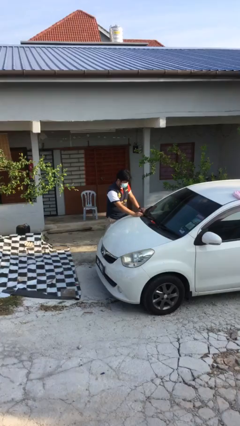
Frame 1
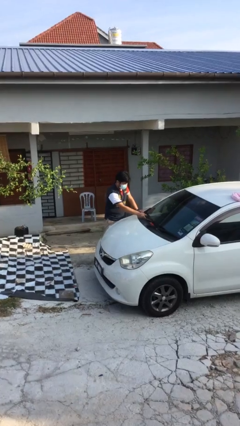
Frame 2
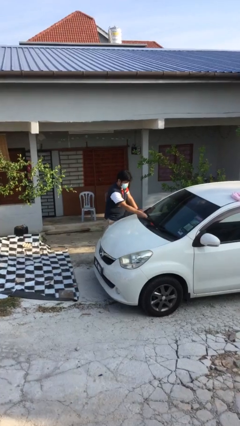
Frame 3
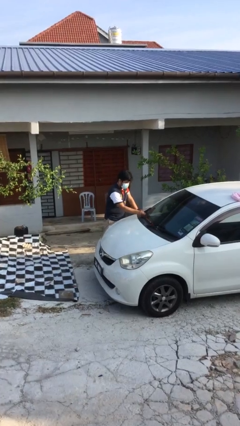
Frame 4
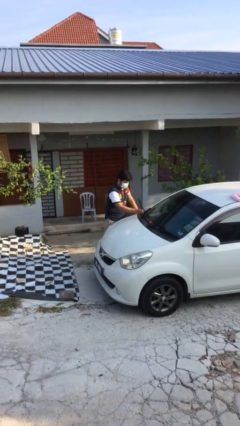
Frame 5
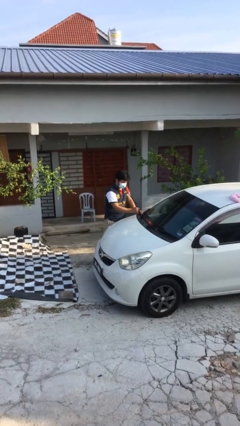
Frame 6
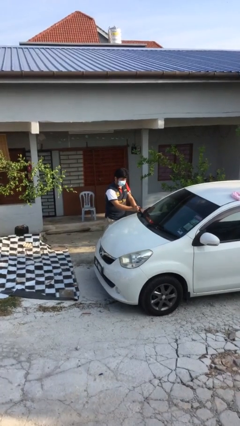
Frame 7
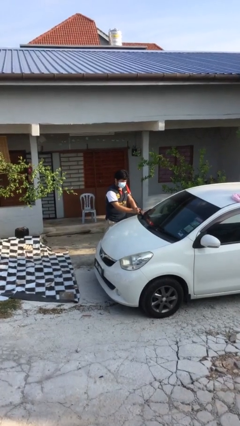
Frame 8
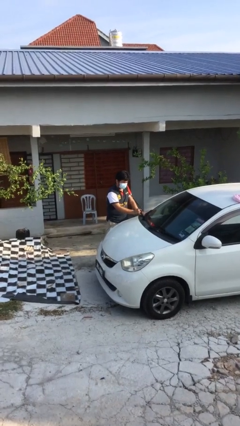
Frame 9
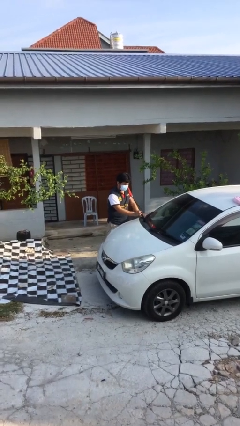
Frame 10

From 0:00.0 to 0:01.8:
person flips up car wipers

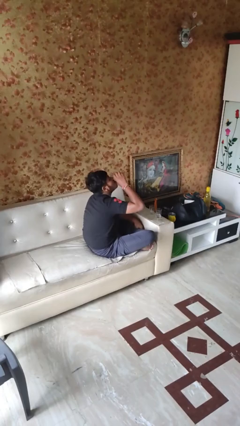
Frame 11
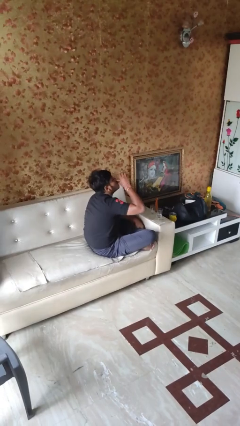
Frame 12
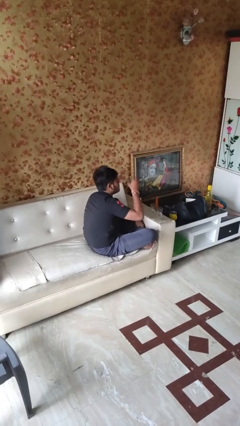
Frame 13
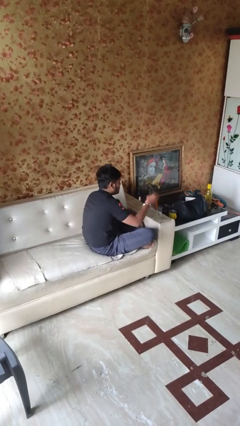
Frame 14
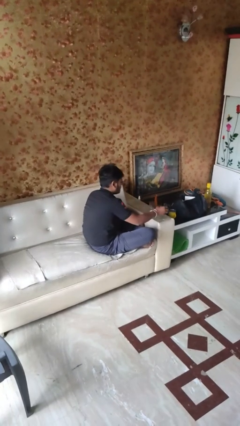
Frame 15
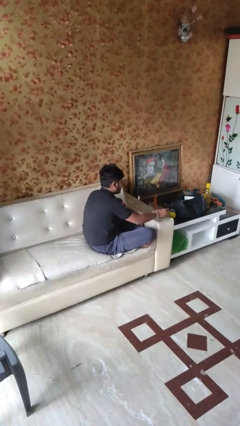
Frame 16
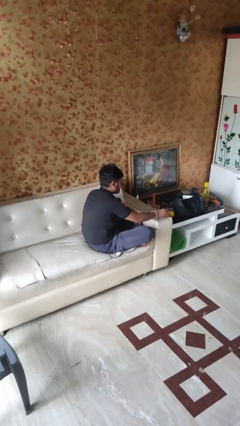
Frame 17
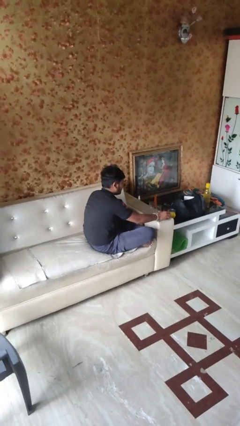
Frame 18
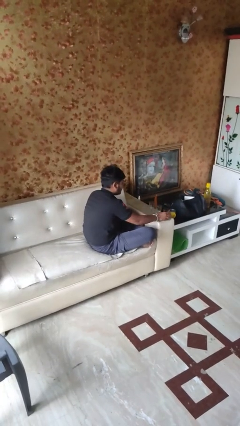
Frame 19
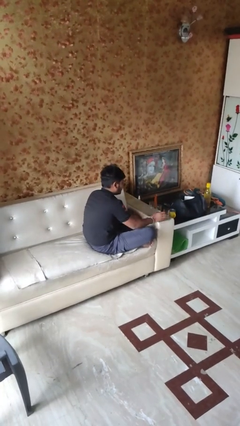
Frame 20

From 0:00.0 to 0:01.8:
person puts down object on table

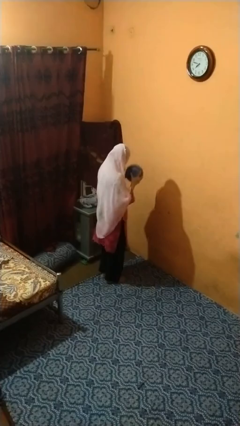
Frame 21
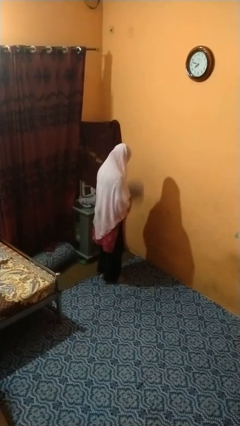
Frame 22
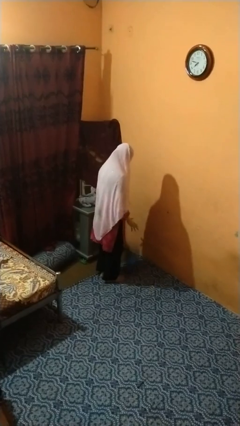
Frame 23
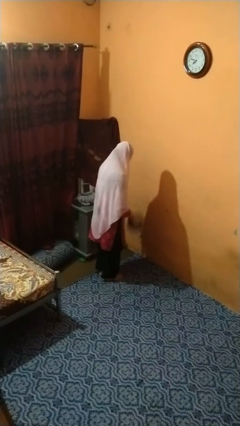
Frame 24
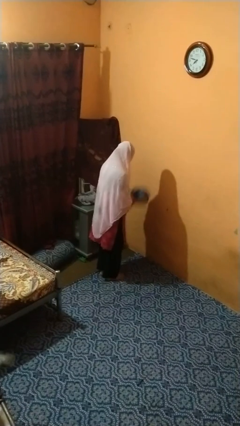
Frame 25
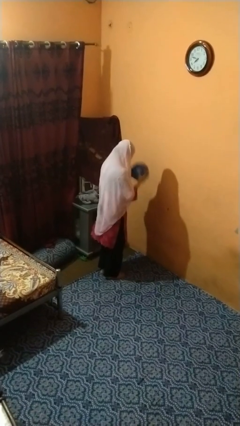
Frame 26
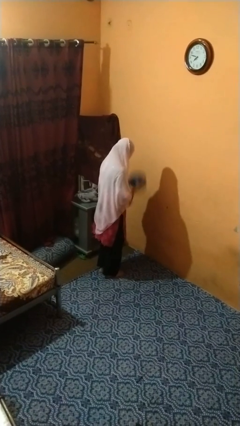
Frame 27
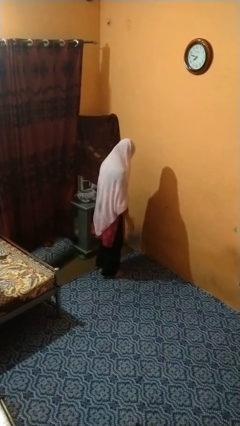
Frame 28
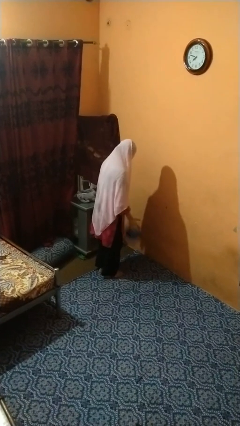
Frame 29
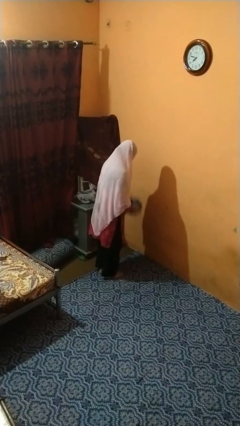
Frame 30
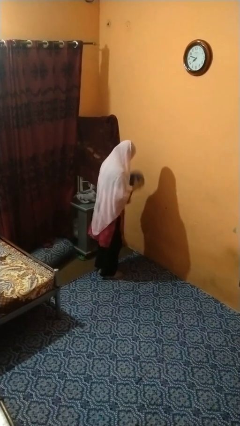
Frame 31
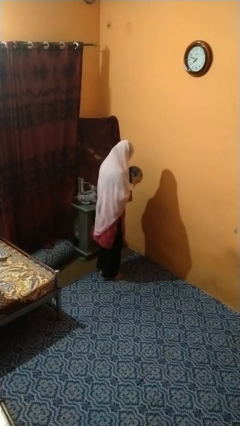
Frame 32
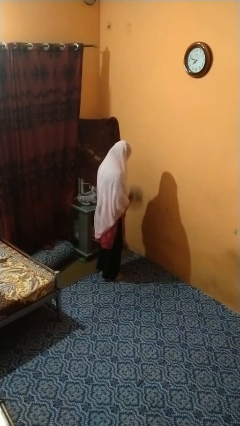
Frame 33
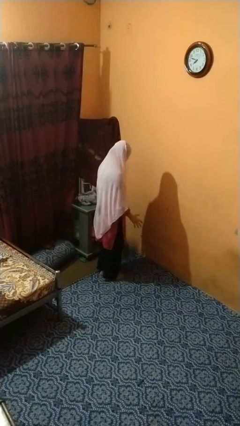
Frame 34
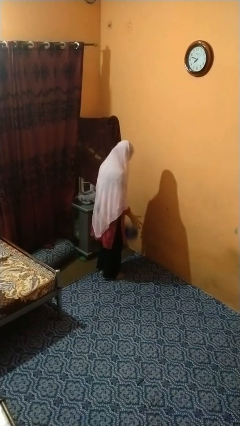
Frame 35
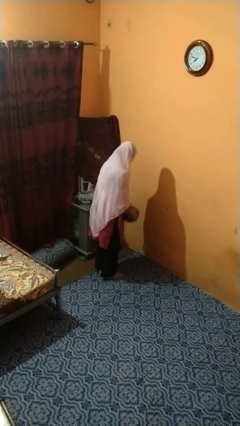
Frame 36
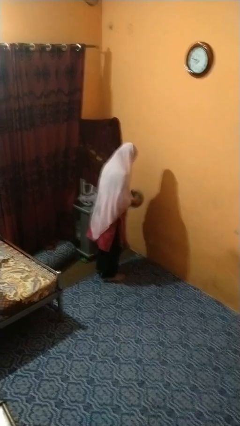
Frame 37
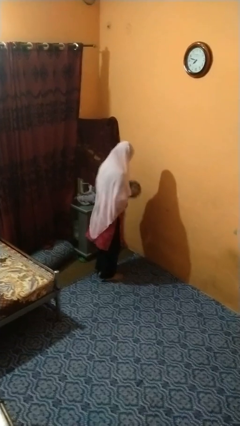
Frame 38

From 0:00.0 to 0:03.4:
person bounces ball on floor

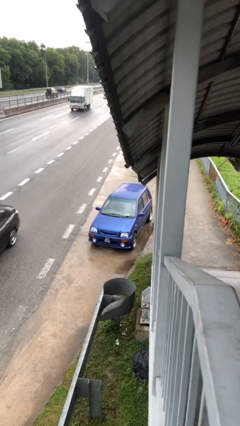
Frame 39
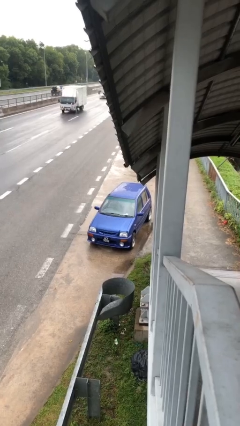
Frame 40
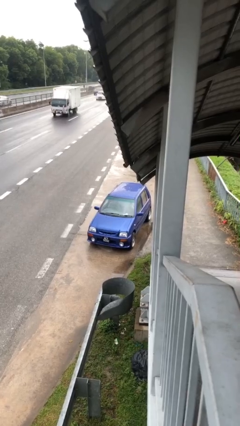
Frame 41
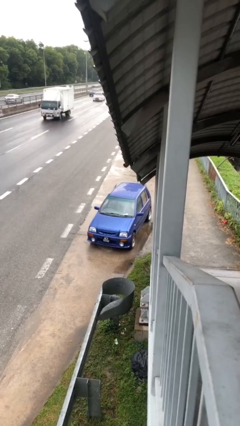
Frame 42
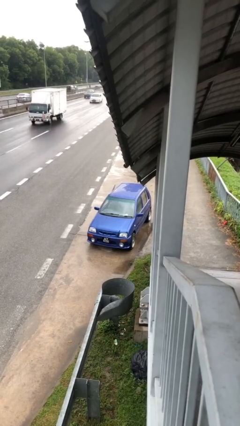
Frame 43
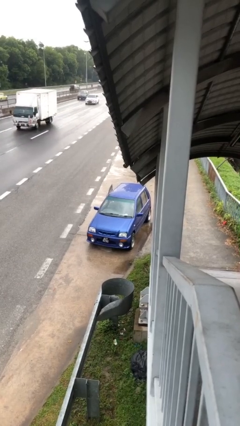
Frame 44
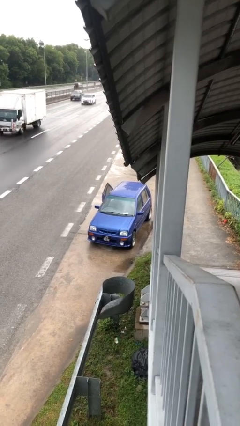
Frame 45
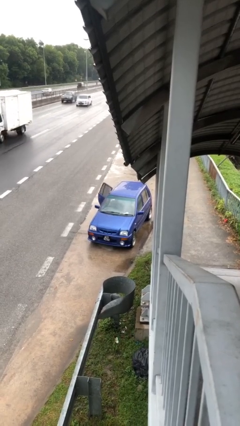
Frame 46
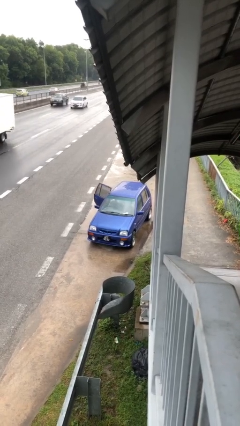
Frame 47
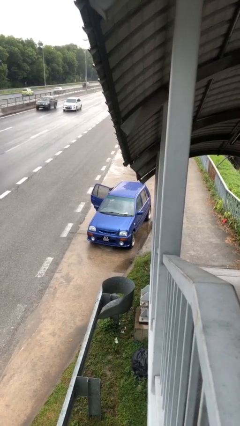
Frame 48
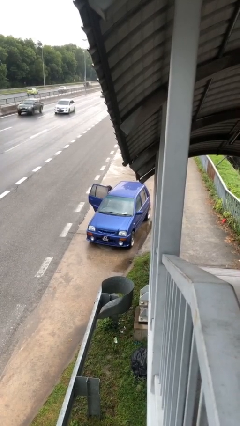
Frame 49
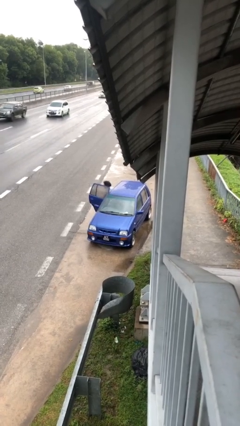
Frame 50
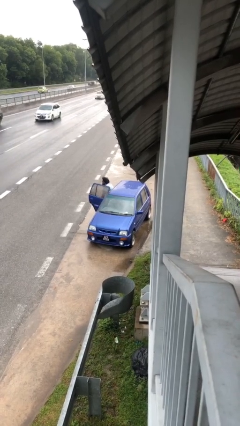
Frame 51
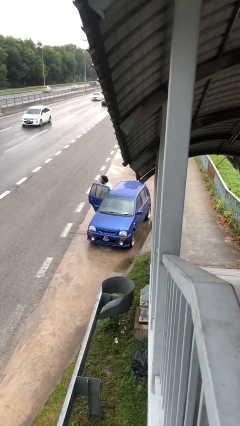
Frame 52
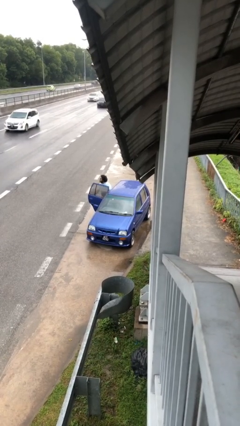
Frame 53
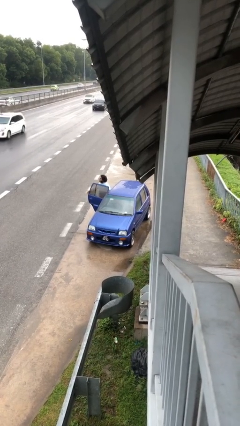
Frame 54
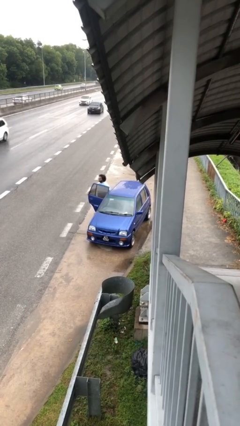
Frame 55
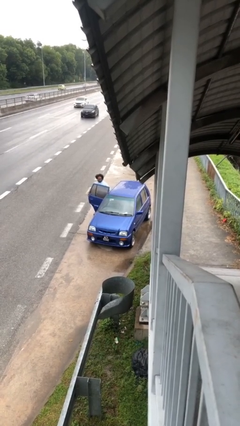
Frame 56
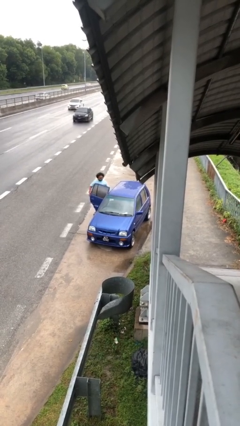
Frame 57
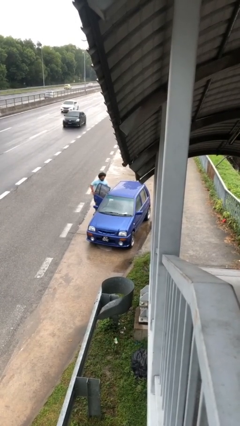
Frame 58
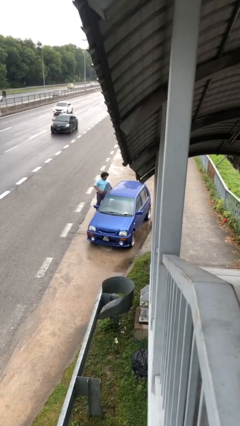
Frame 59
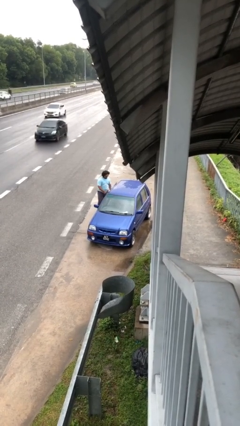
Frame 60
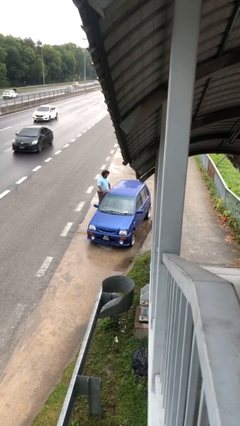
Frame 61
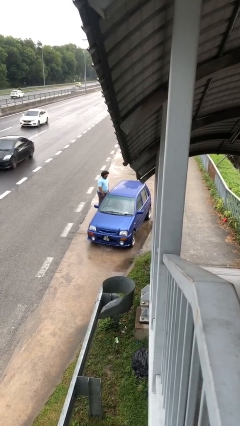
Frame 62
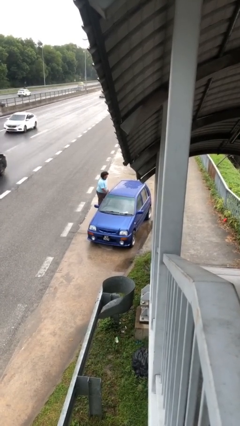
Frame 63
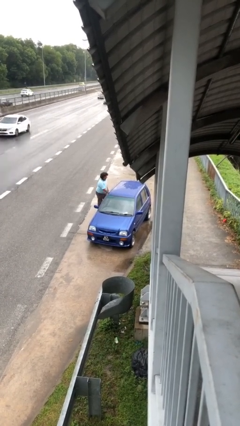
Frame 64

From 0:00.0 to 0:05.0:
car drops off person

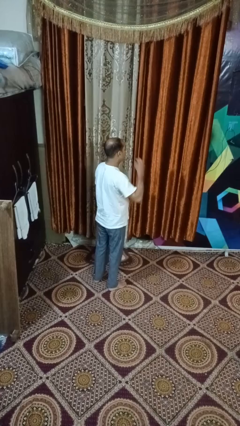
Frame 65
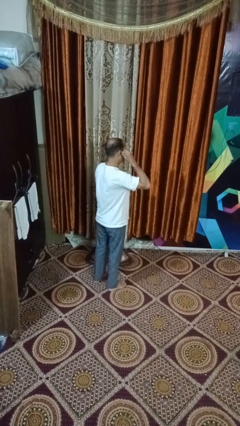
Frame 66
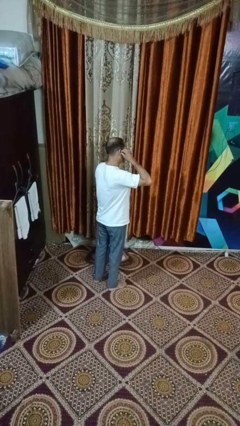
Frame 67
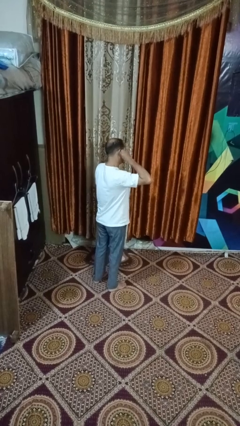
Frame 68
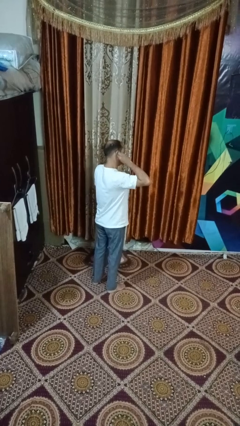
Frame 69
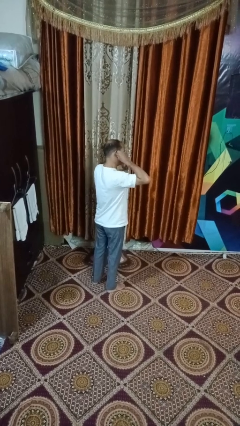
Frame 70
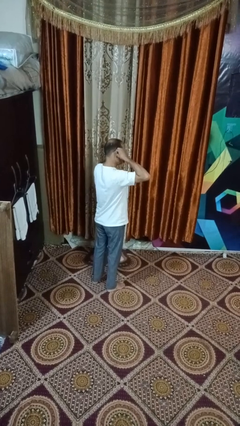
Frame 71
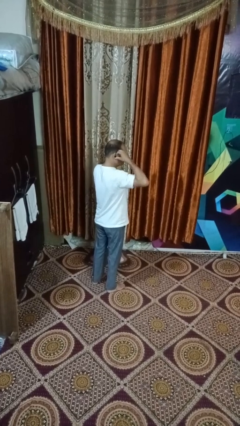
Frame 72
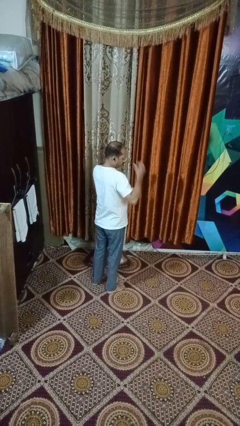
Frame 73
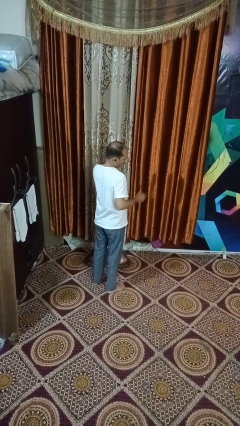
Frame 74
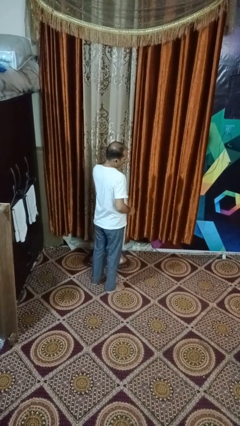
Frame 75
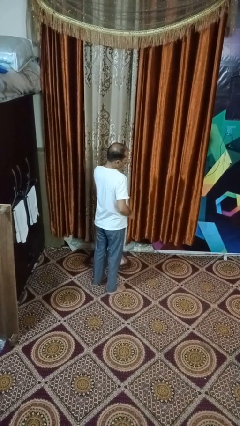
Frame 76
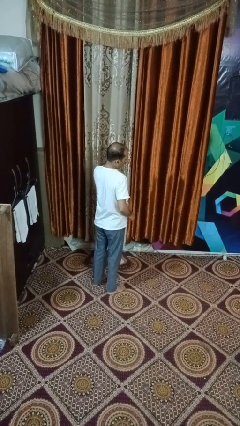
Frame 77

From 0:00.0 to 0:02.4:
person puts on headphones

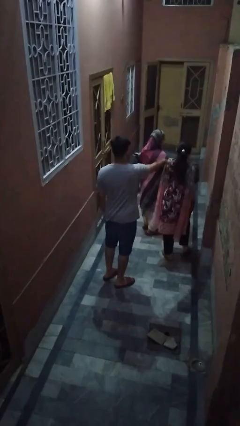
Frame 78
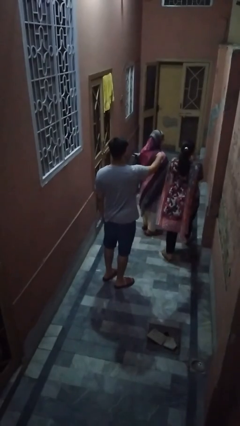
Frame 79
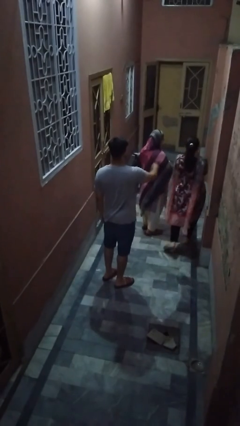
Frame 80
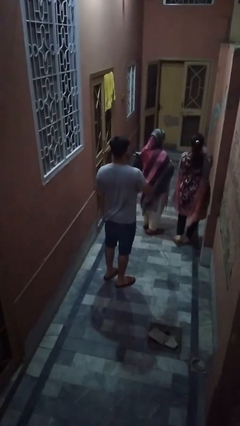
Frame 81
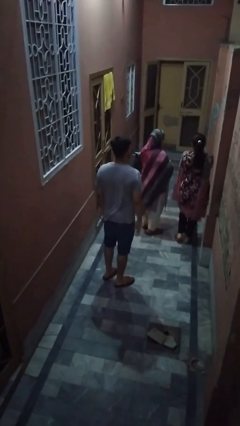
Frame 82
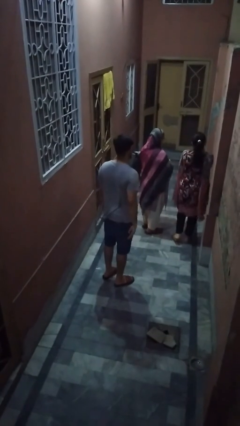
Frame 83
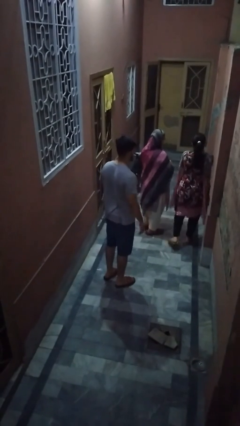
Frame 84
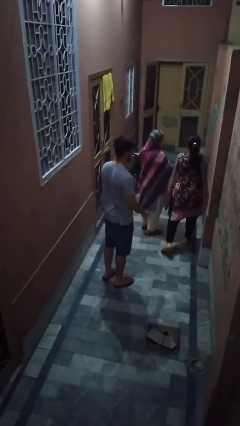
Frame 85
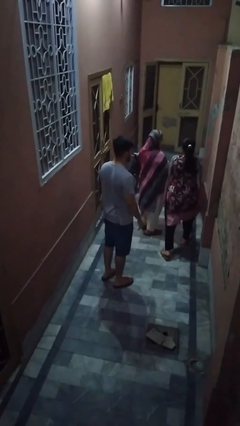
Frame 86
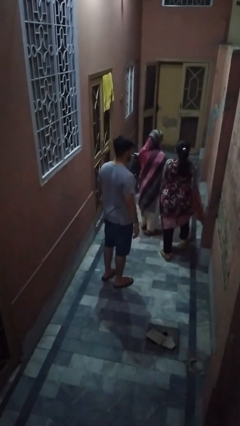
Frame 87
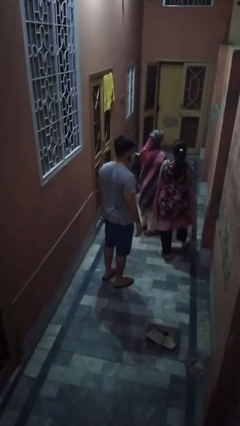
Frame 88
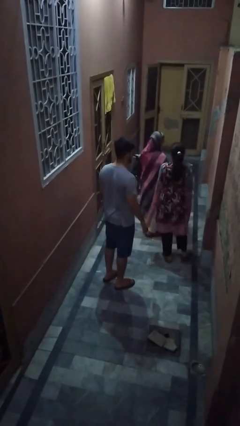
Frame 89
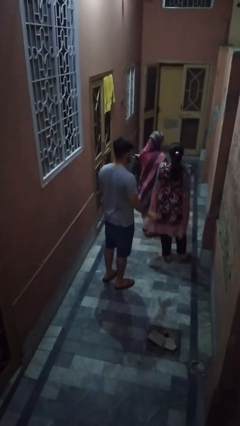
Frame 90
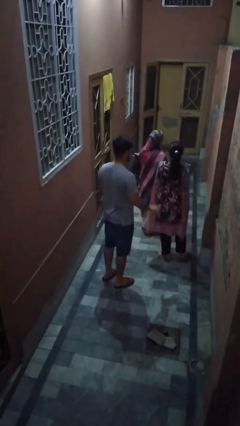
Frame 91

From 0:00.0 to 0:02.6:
person shoves person

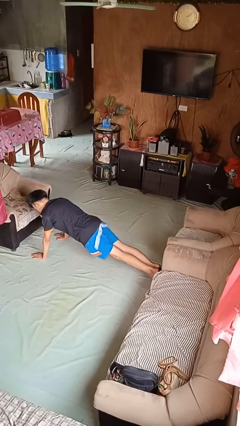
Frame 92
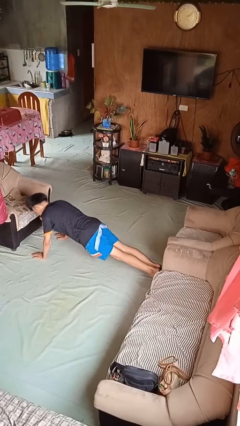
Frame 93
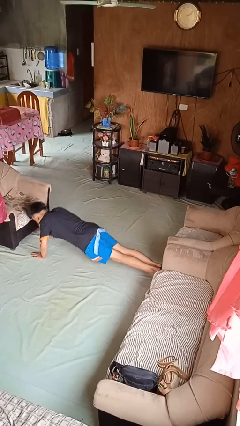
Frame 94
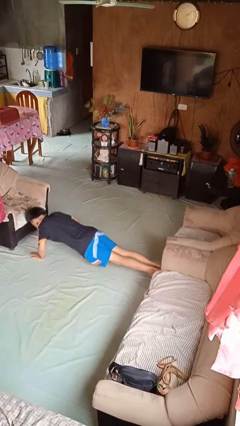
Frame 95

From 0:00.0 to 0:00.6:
person exercises with pushup
